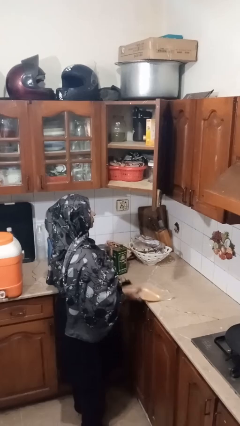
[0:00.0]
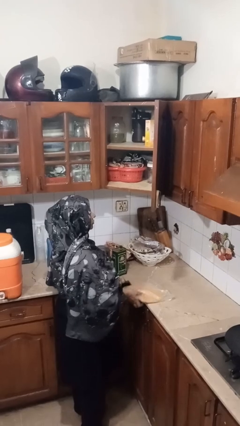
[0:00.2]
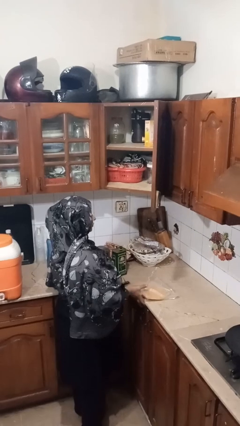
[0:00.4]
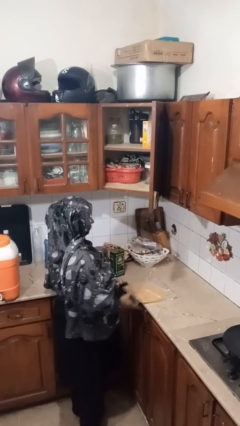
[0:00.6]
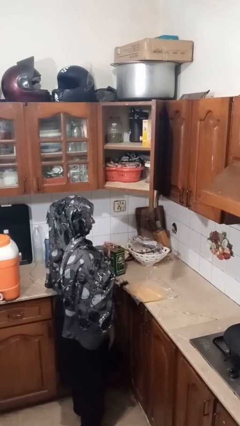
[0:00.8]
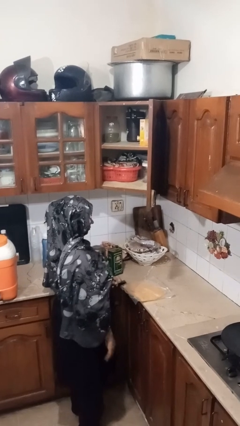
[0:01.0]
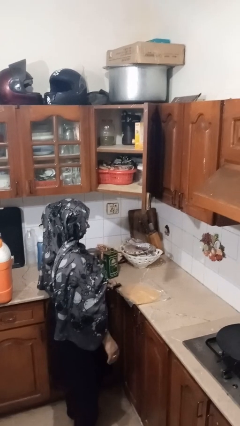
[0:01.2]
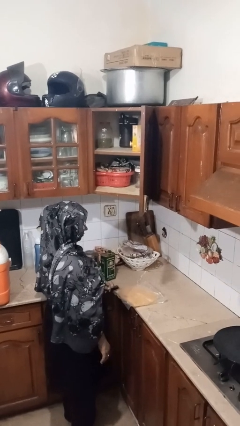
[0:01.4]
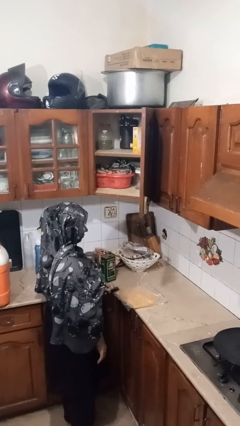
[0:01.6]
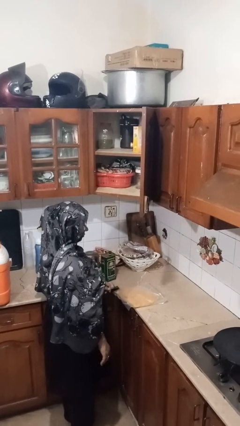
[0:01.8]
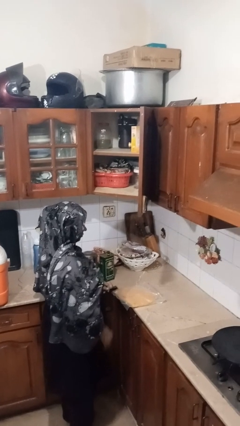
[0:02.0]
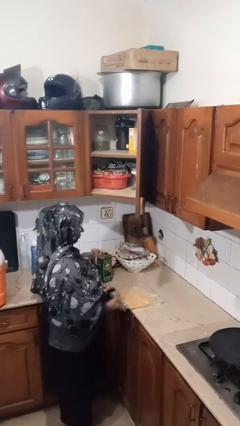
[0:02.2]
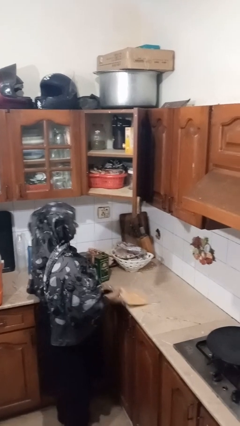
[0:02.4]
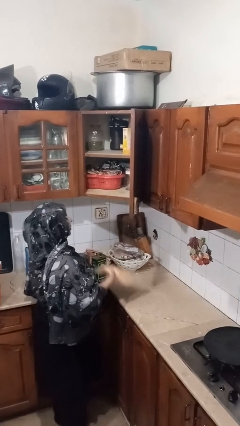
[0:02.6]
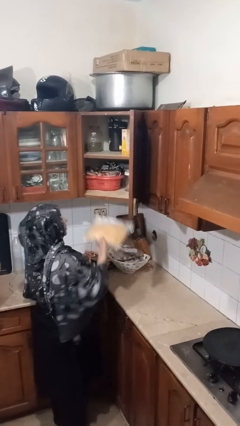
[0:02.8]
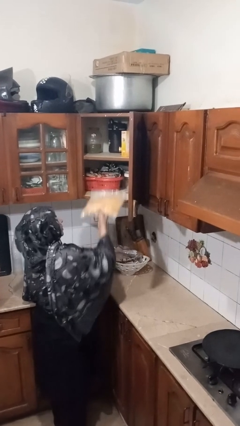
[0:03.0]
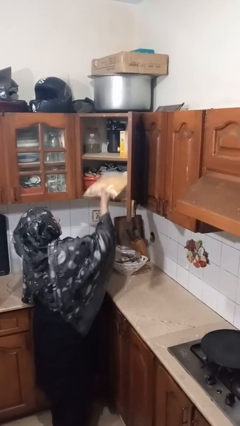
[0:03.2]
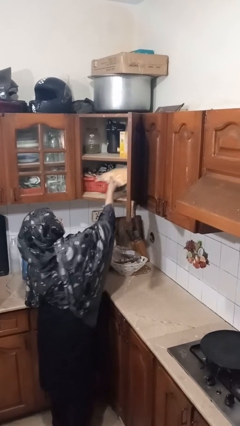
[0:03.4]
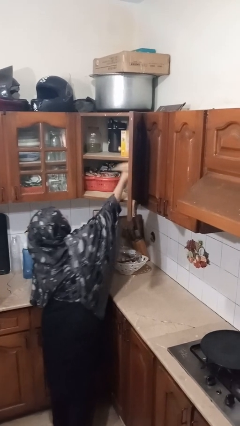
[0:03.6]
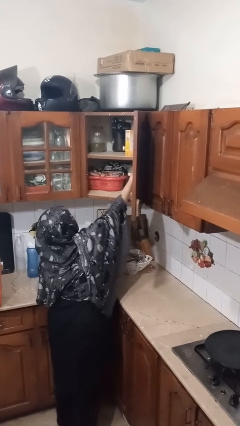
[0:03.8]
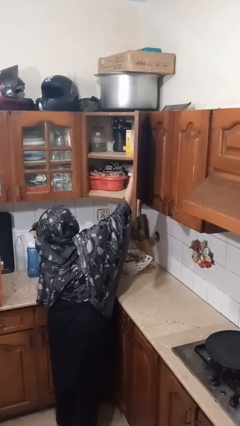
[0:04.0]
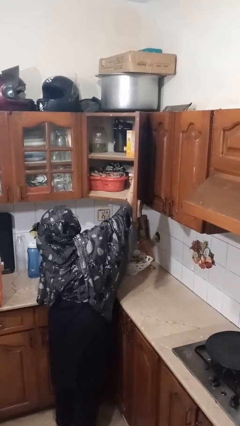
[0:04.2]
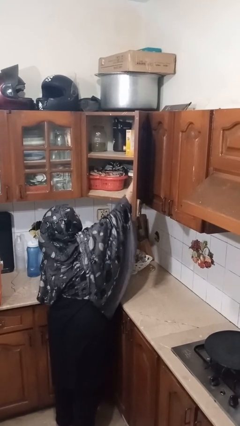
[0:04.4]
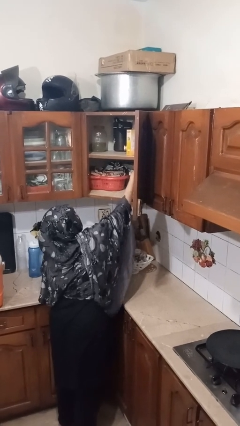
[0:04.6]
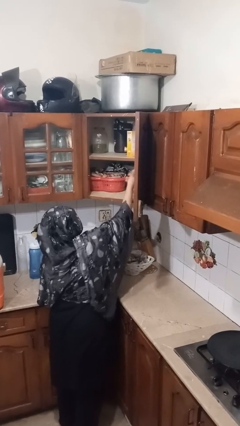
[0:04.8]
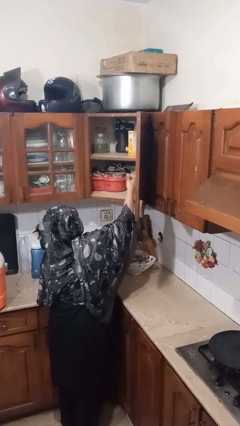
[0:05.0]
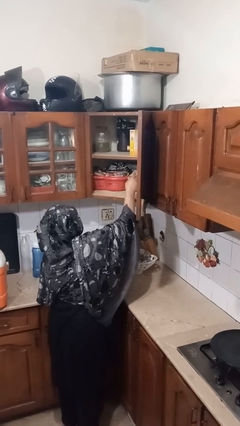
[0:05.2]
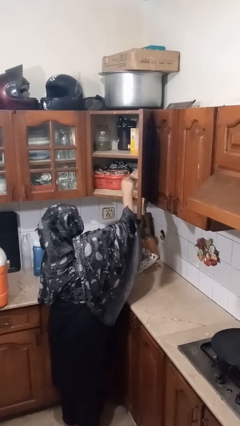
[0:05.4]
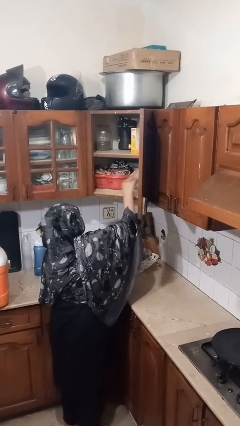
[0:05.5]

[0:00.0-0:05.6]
person loads groceries into cabinet
